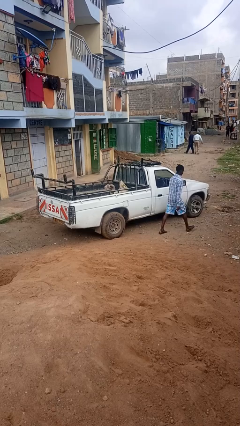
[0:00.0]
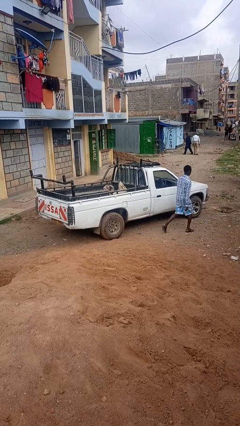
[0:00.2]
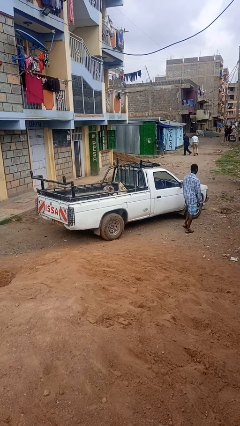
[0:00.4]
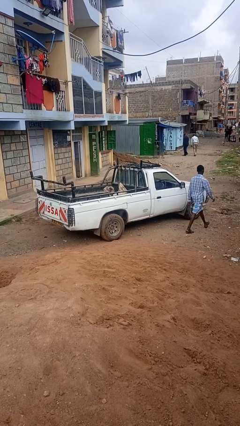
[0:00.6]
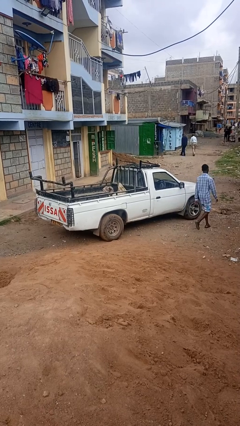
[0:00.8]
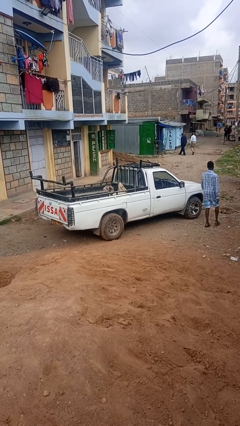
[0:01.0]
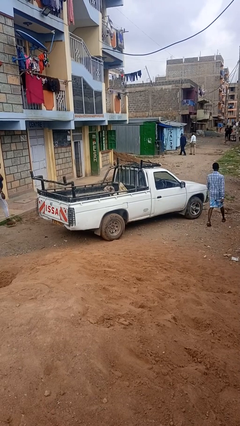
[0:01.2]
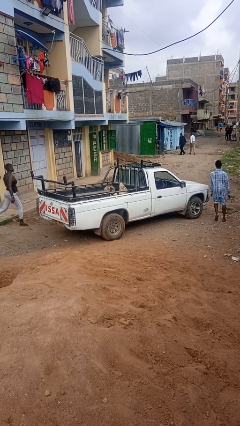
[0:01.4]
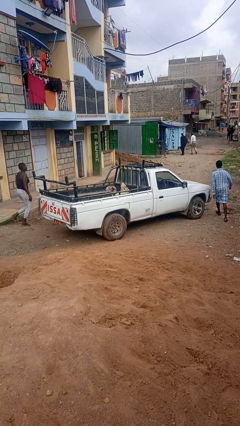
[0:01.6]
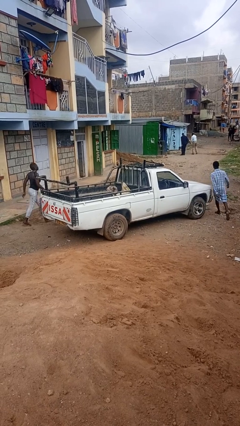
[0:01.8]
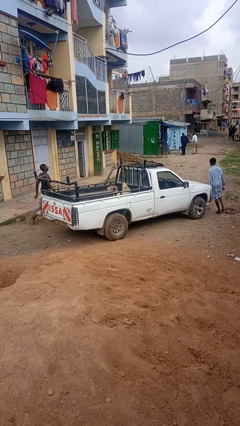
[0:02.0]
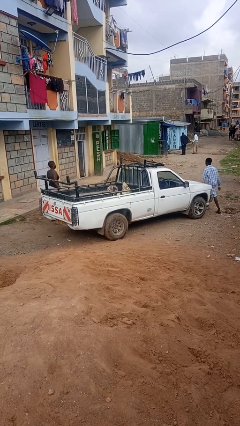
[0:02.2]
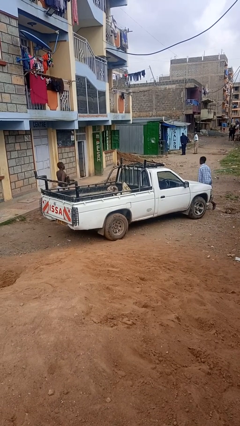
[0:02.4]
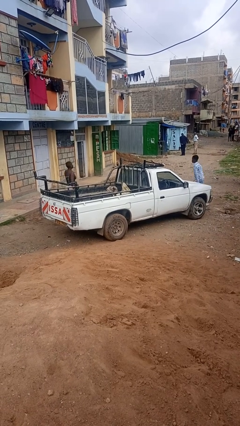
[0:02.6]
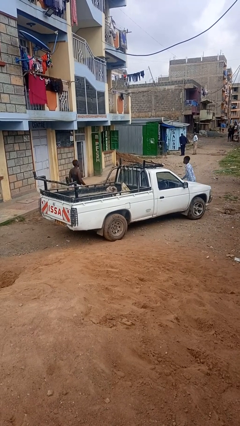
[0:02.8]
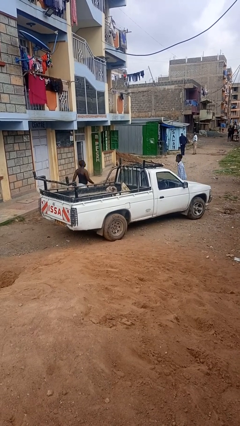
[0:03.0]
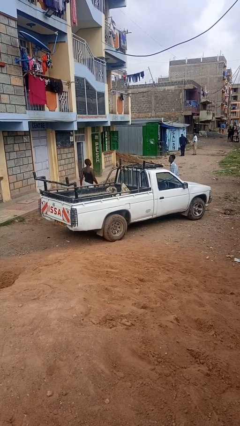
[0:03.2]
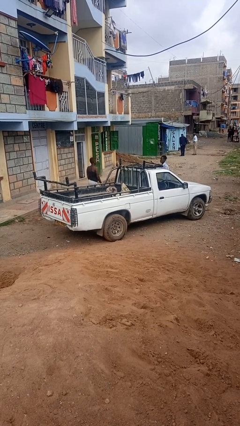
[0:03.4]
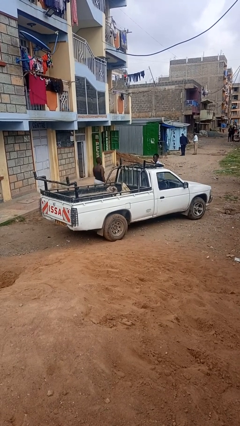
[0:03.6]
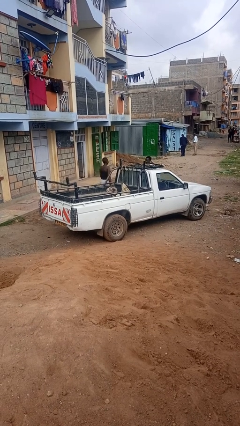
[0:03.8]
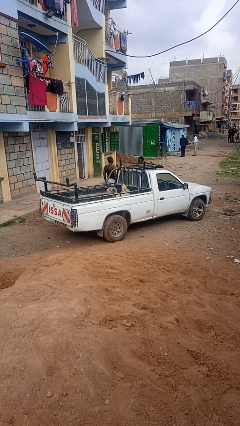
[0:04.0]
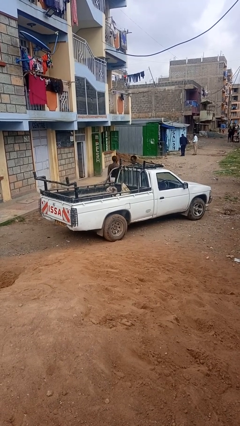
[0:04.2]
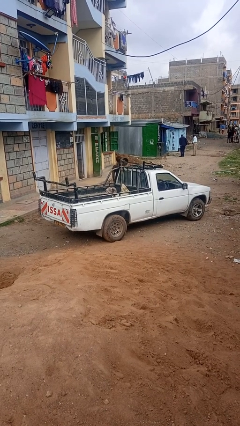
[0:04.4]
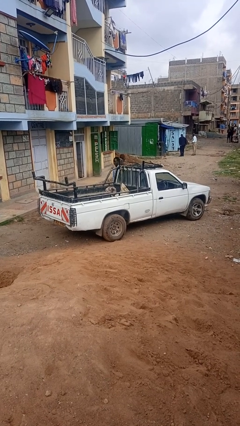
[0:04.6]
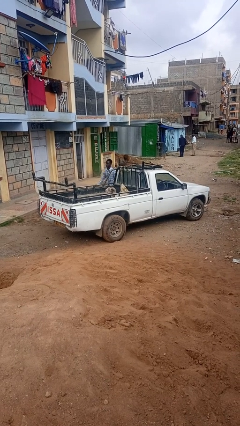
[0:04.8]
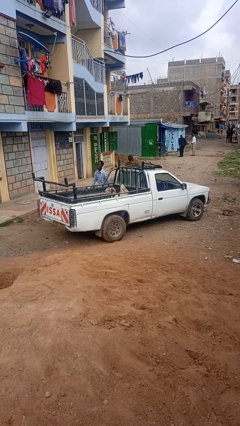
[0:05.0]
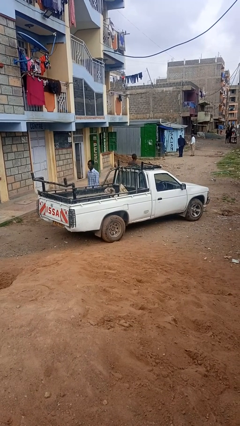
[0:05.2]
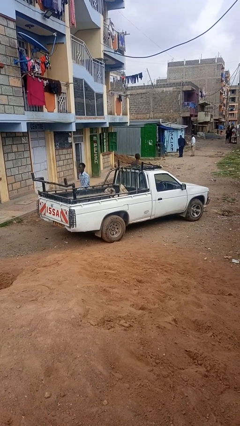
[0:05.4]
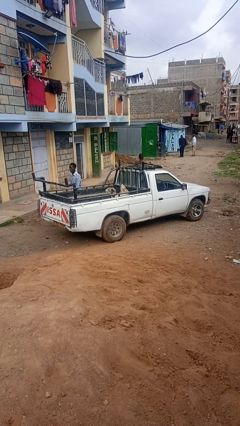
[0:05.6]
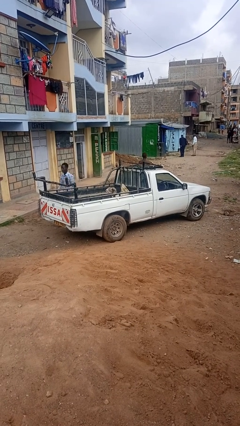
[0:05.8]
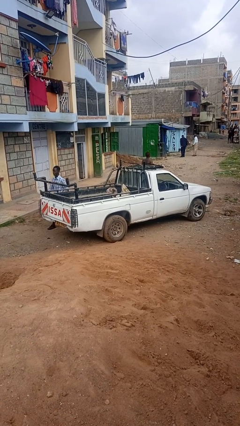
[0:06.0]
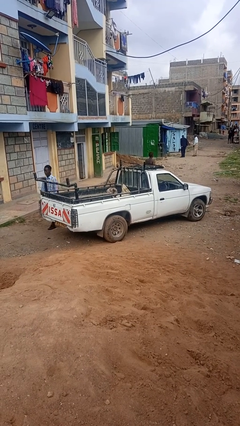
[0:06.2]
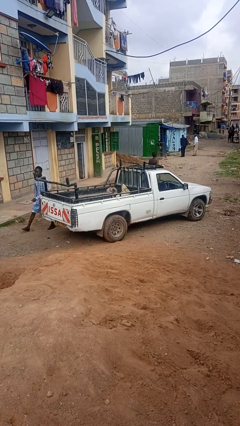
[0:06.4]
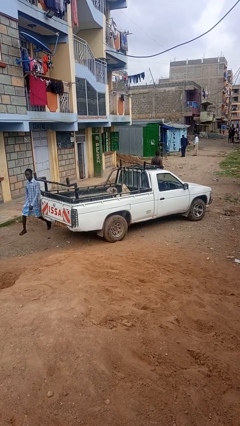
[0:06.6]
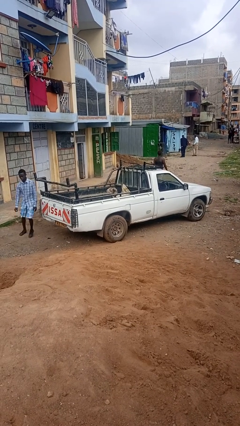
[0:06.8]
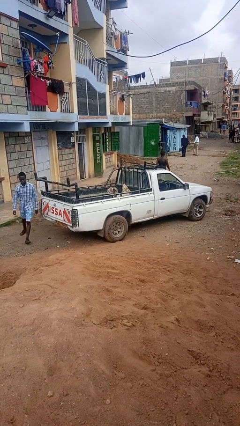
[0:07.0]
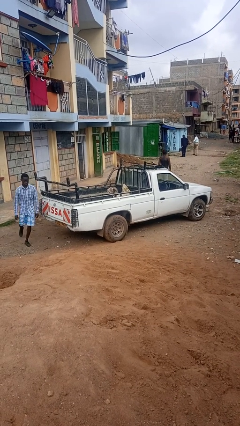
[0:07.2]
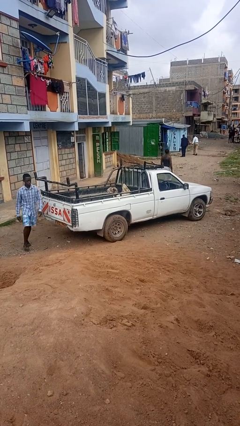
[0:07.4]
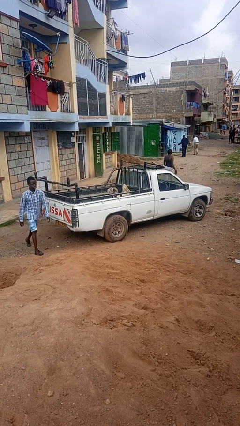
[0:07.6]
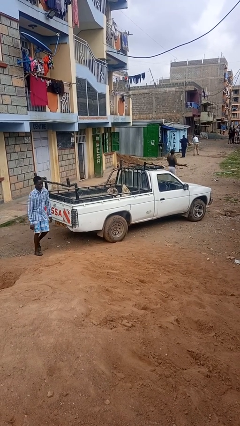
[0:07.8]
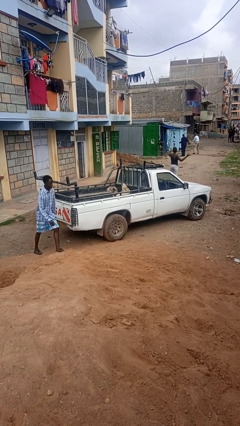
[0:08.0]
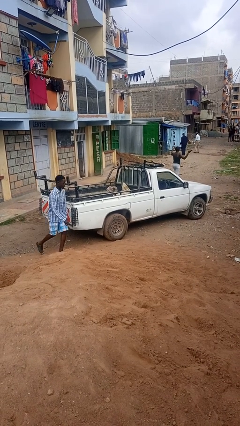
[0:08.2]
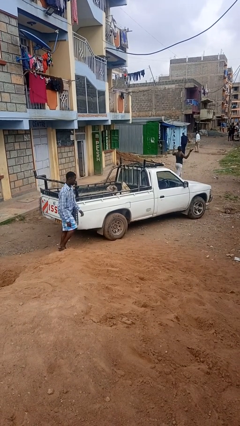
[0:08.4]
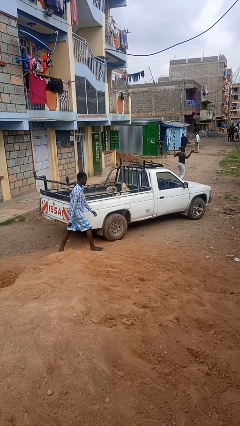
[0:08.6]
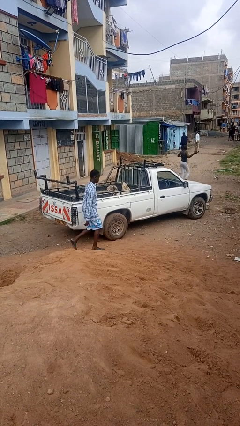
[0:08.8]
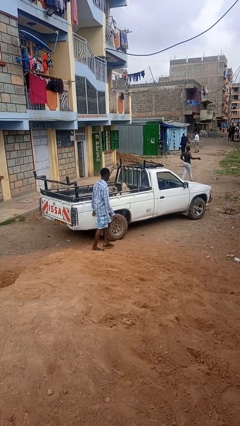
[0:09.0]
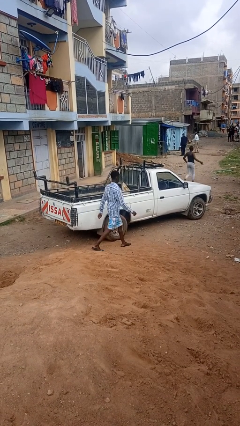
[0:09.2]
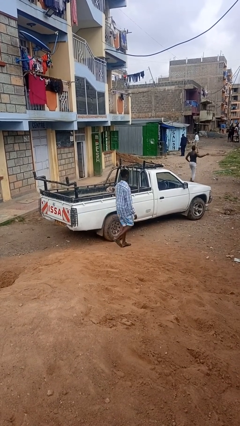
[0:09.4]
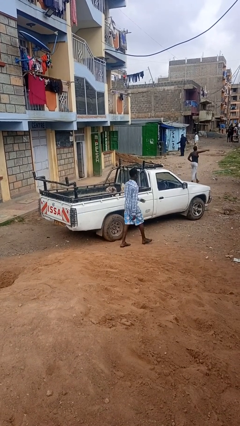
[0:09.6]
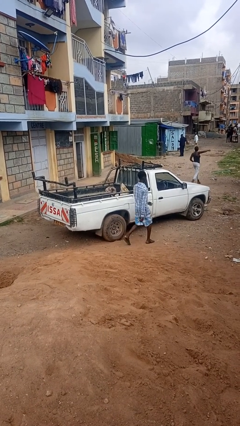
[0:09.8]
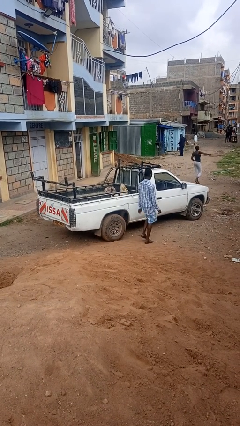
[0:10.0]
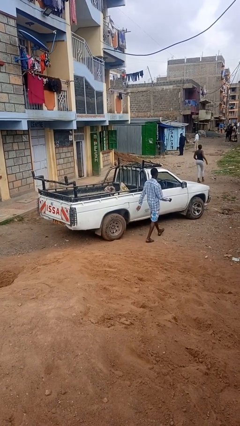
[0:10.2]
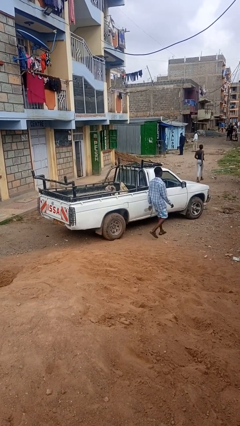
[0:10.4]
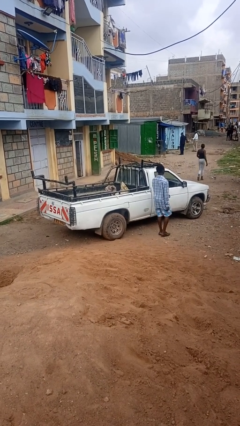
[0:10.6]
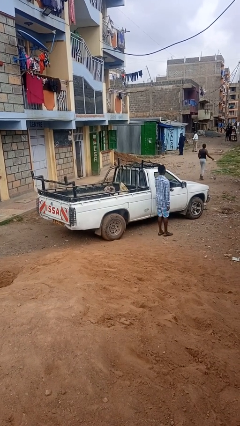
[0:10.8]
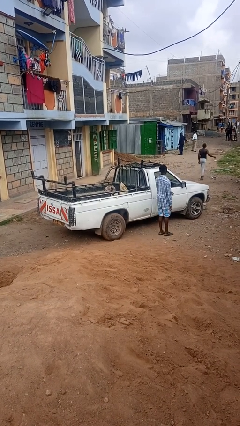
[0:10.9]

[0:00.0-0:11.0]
person walks around car

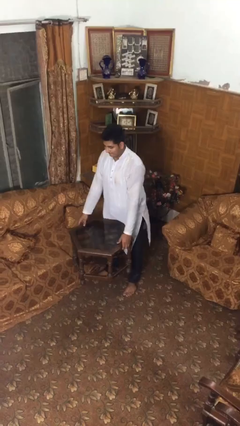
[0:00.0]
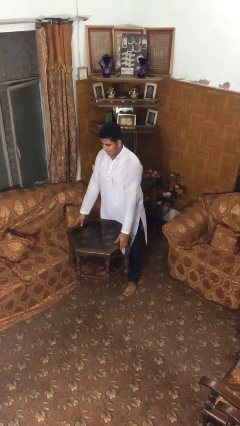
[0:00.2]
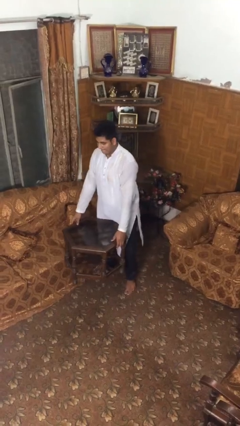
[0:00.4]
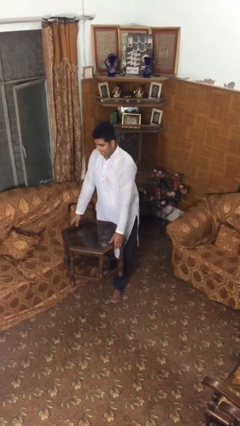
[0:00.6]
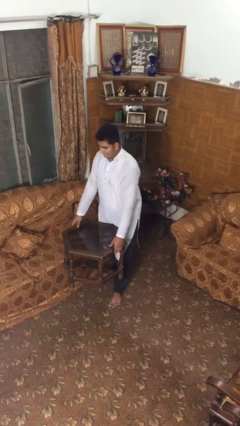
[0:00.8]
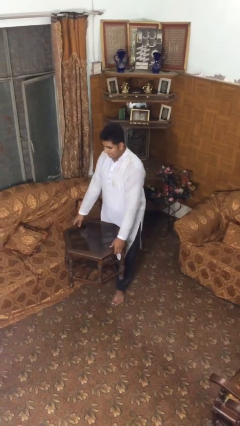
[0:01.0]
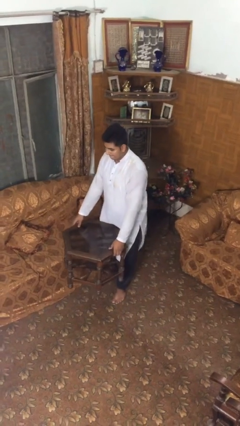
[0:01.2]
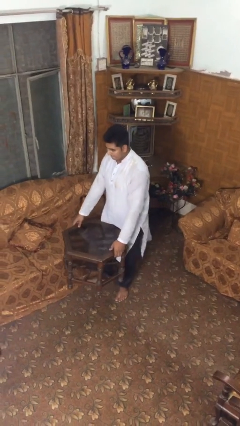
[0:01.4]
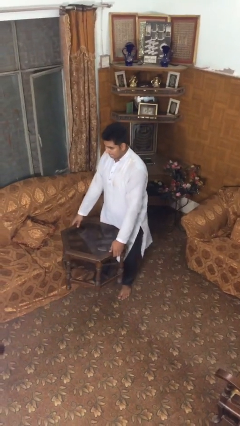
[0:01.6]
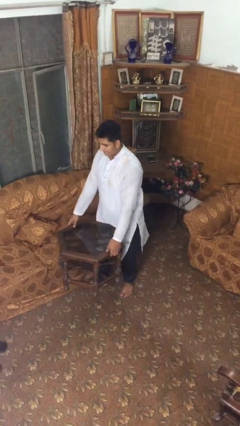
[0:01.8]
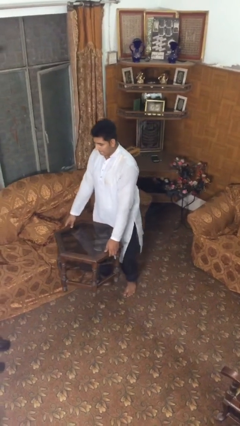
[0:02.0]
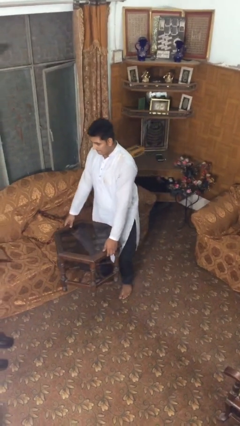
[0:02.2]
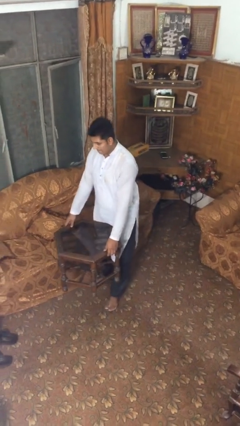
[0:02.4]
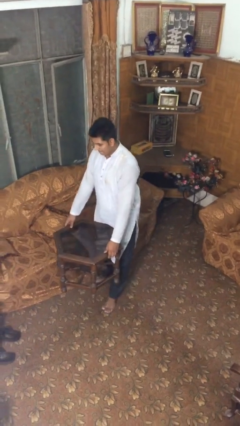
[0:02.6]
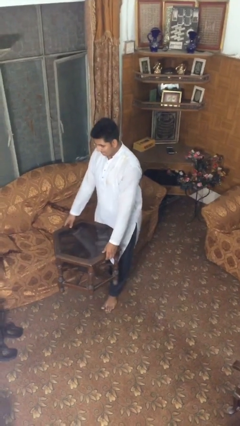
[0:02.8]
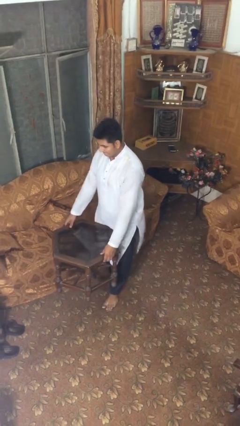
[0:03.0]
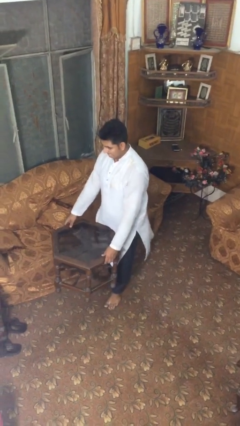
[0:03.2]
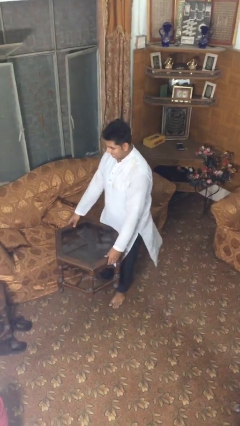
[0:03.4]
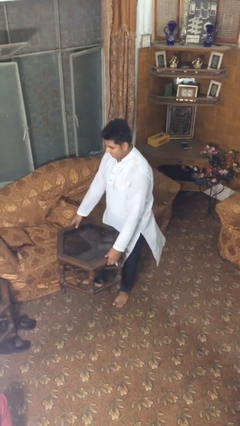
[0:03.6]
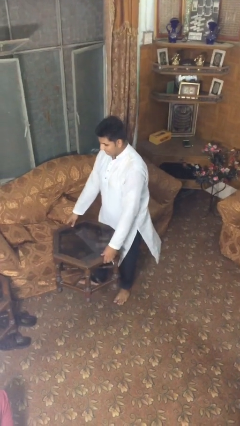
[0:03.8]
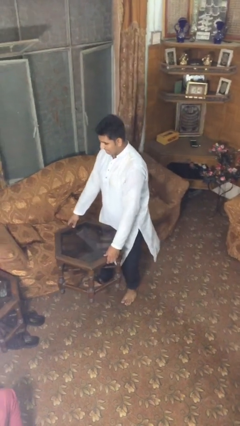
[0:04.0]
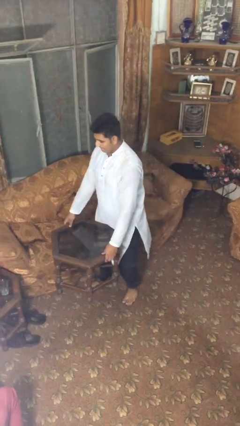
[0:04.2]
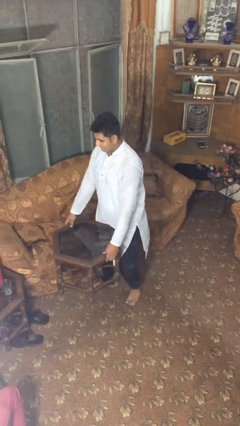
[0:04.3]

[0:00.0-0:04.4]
person carries heavy object

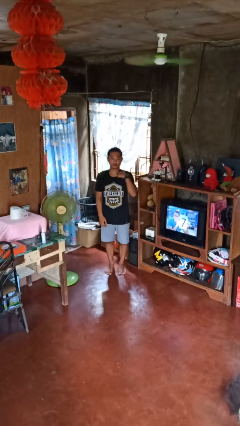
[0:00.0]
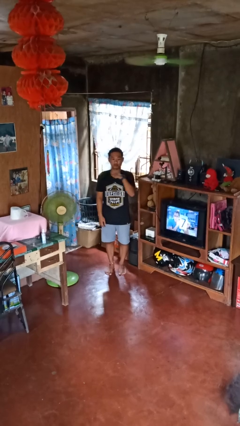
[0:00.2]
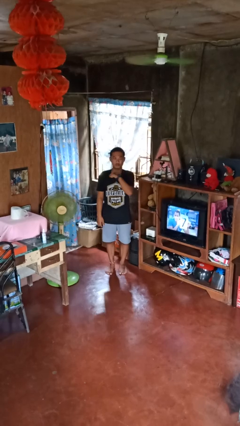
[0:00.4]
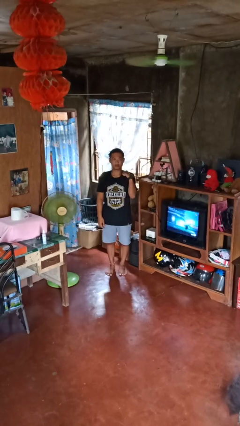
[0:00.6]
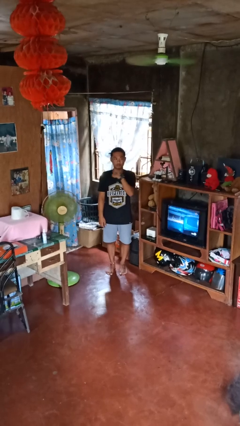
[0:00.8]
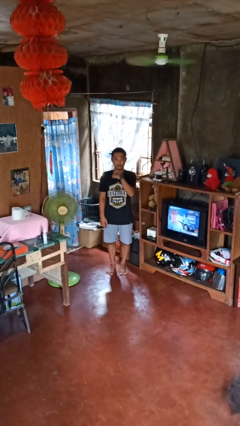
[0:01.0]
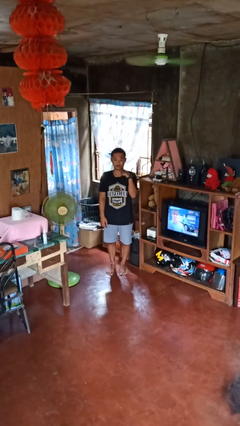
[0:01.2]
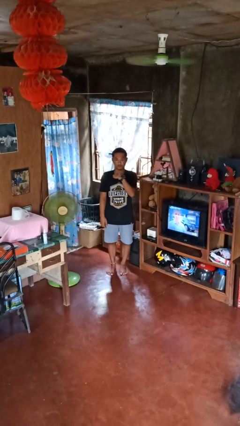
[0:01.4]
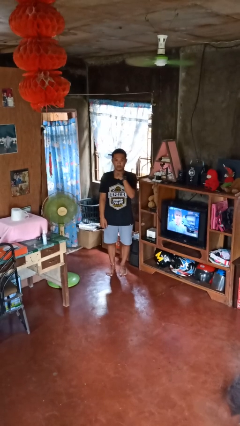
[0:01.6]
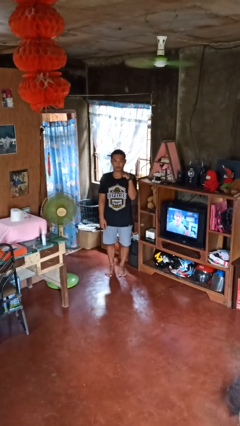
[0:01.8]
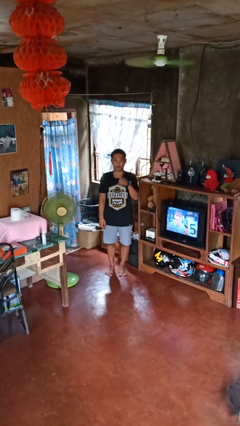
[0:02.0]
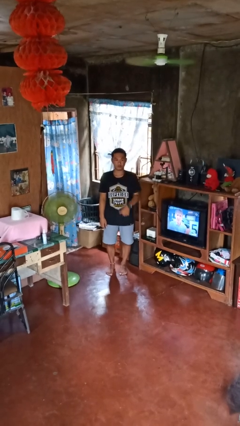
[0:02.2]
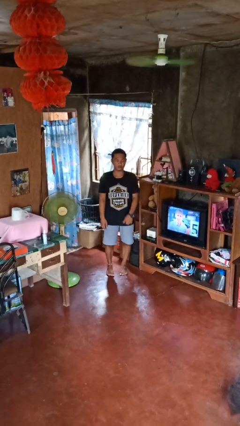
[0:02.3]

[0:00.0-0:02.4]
person gestures cut

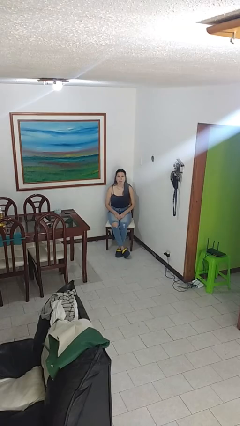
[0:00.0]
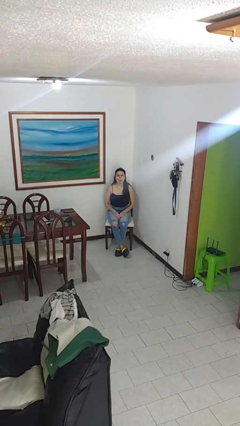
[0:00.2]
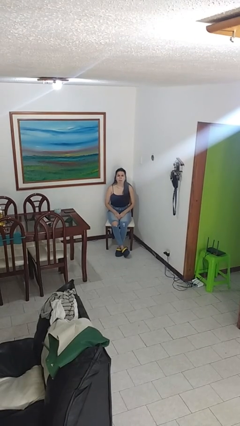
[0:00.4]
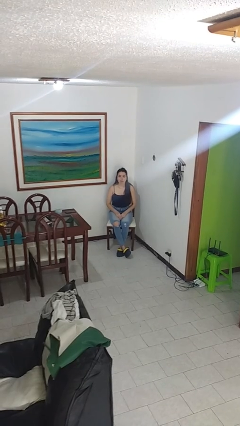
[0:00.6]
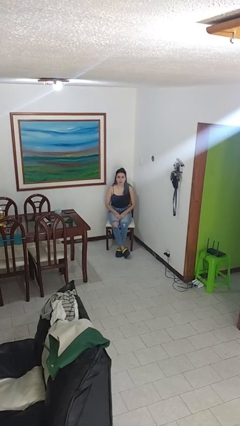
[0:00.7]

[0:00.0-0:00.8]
person sticks out tongue
